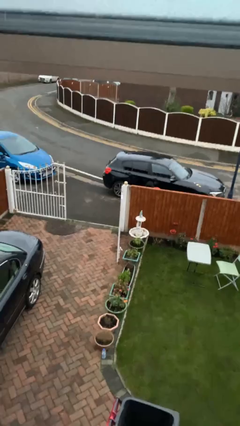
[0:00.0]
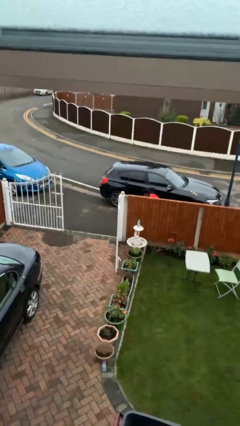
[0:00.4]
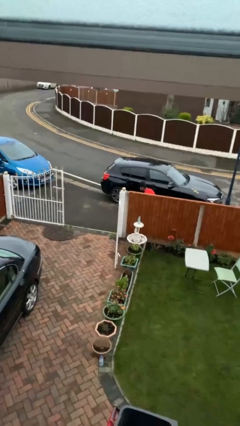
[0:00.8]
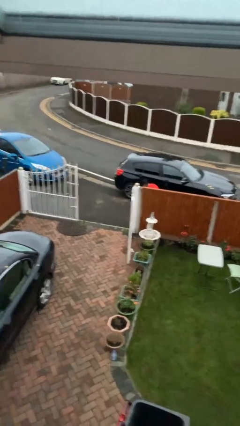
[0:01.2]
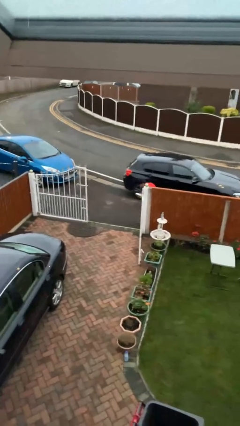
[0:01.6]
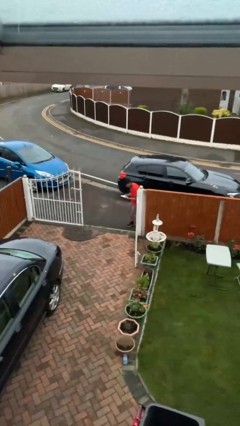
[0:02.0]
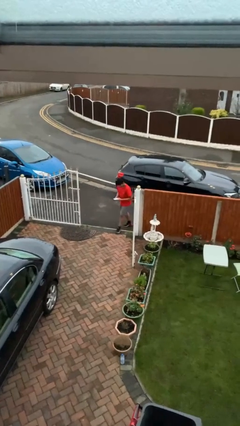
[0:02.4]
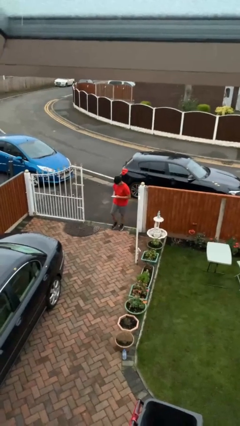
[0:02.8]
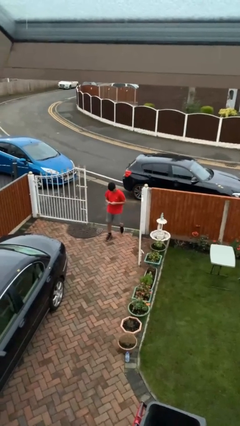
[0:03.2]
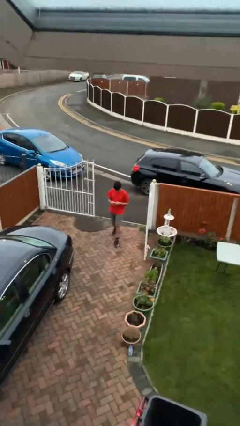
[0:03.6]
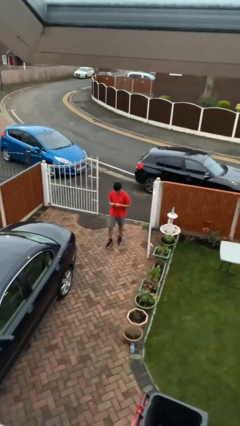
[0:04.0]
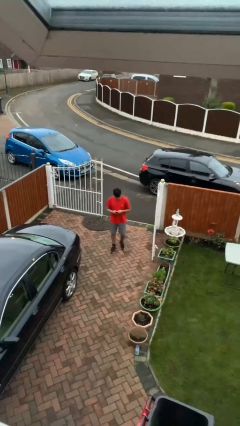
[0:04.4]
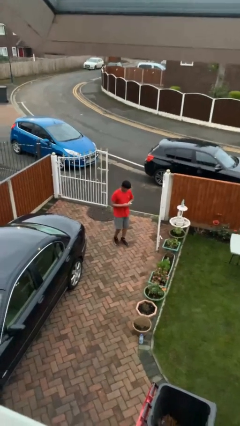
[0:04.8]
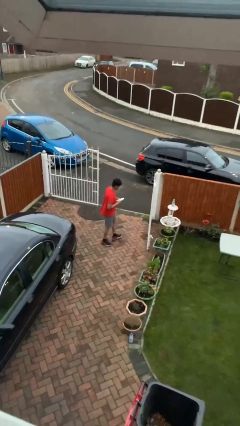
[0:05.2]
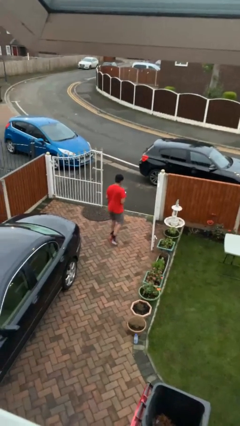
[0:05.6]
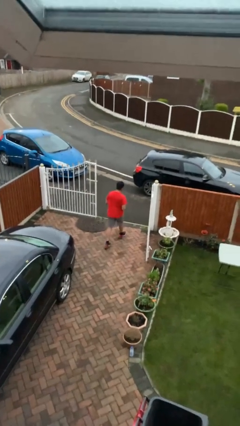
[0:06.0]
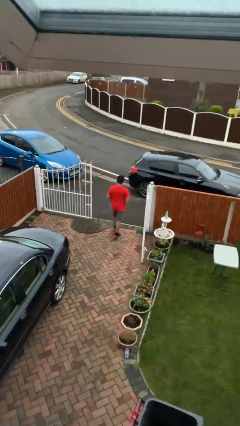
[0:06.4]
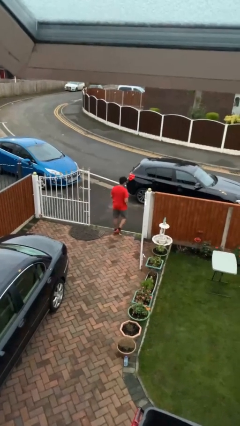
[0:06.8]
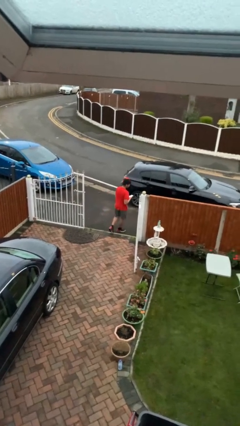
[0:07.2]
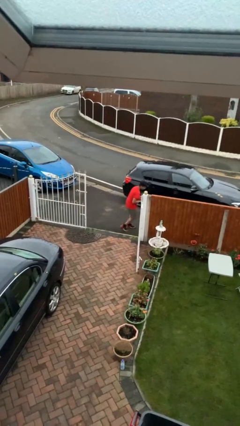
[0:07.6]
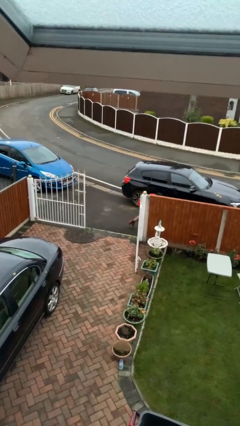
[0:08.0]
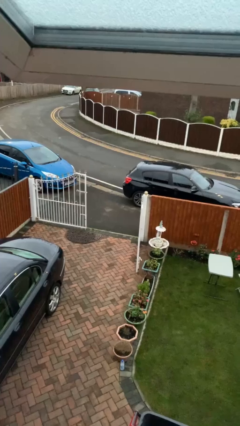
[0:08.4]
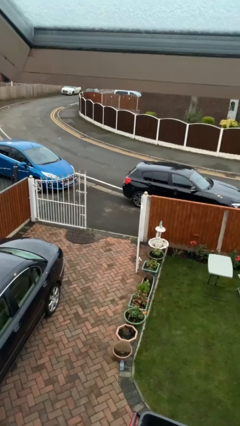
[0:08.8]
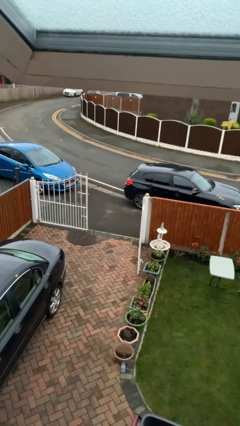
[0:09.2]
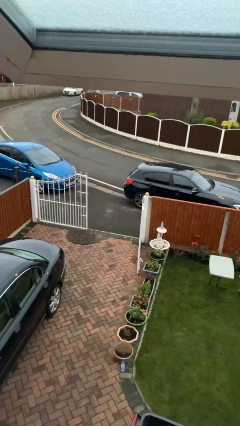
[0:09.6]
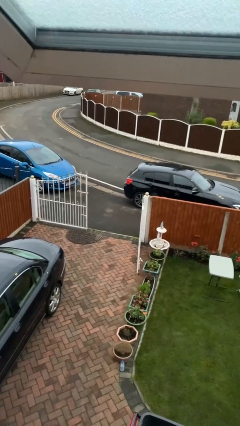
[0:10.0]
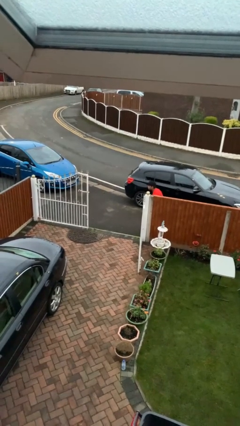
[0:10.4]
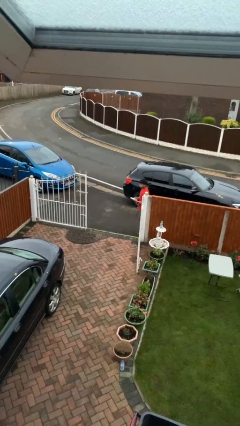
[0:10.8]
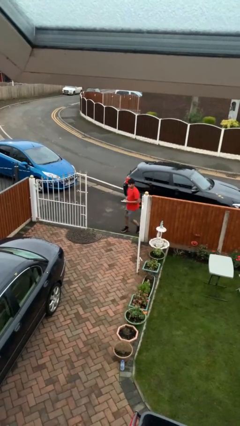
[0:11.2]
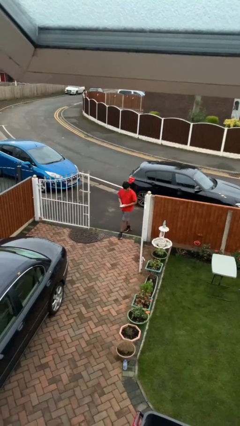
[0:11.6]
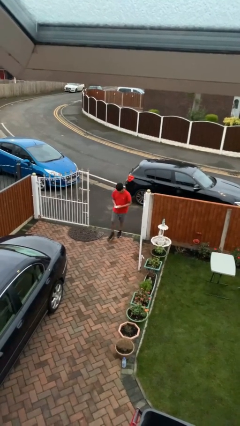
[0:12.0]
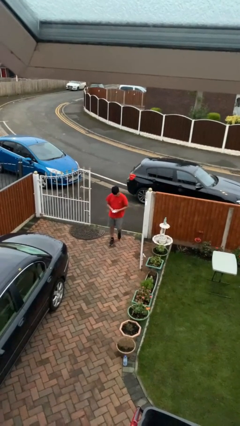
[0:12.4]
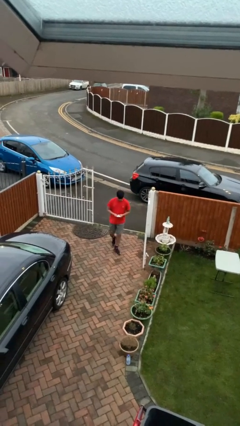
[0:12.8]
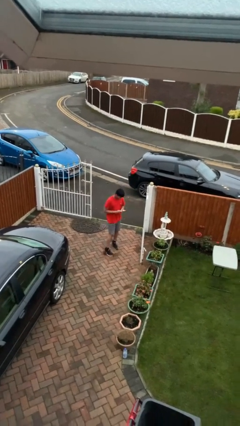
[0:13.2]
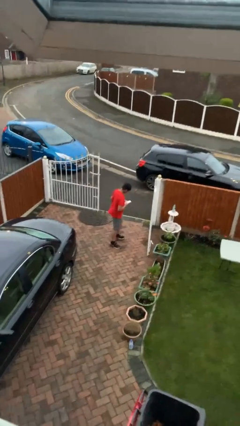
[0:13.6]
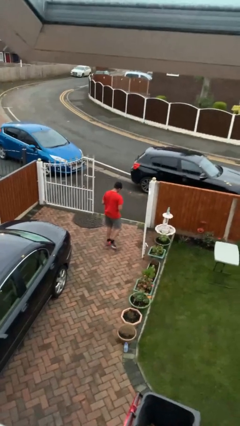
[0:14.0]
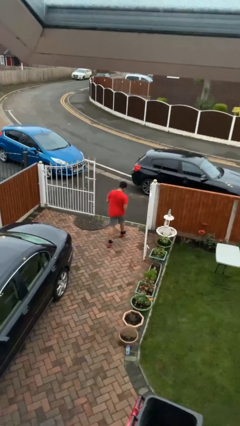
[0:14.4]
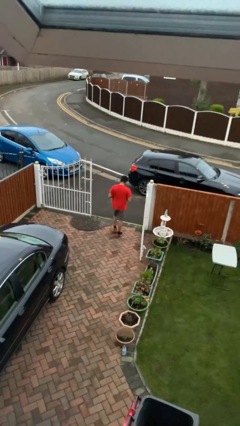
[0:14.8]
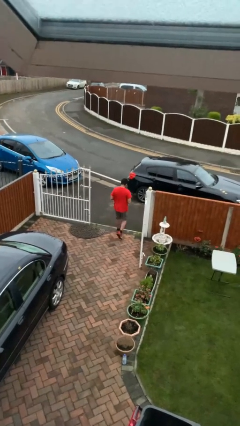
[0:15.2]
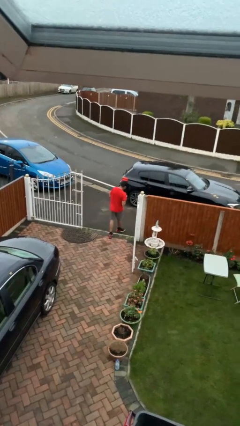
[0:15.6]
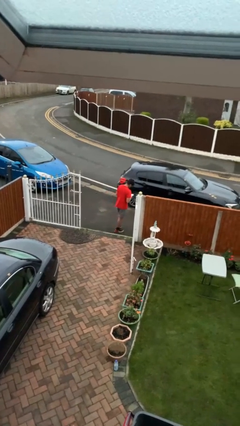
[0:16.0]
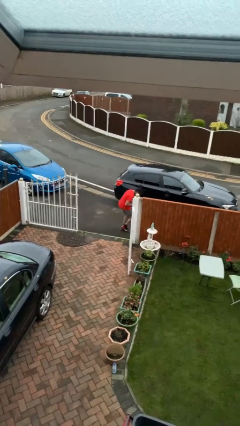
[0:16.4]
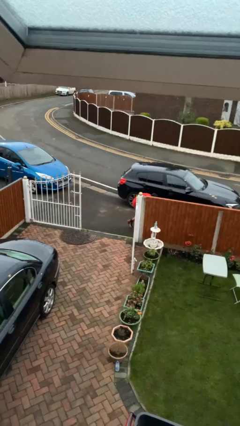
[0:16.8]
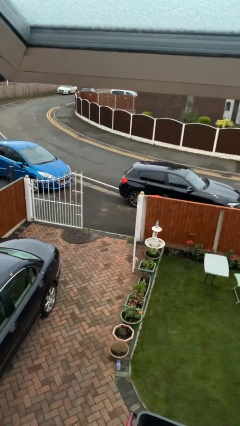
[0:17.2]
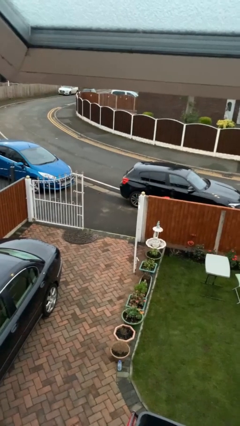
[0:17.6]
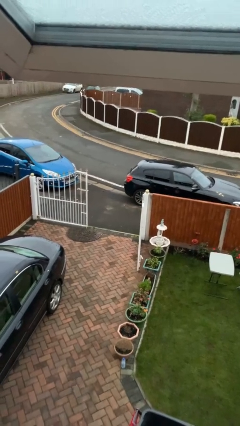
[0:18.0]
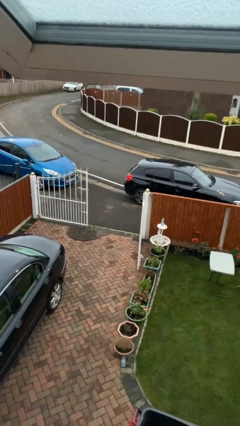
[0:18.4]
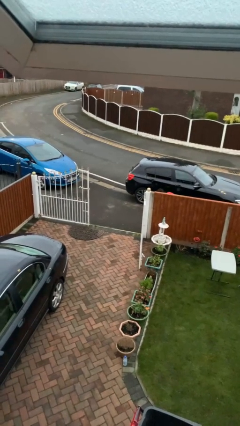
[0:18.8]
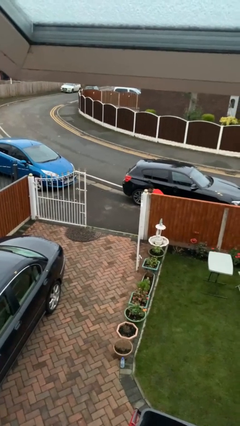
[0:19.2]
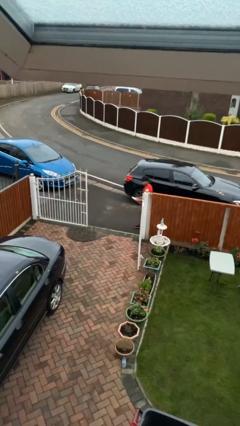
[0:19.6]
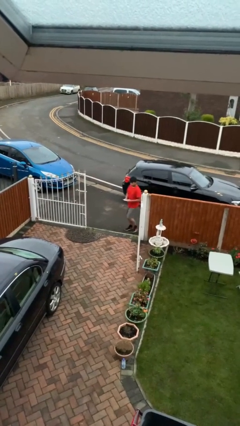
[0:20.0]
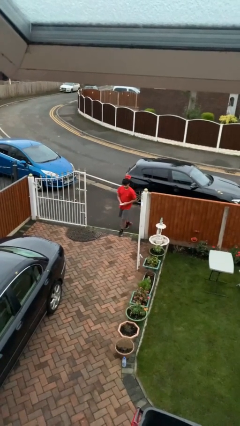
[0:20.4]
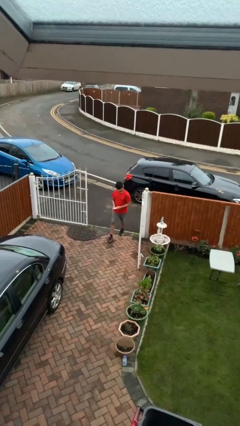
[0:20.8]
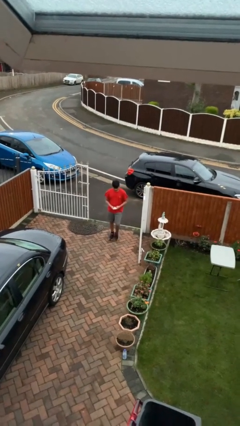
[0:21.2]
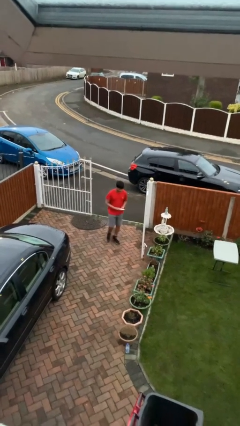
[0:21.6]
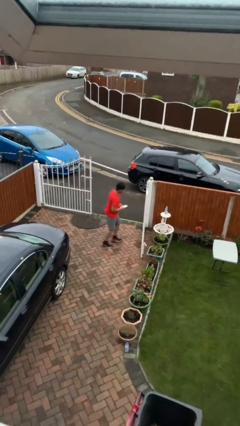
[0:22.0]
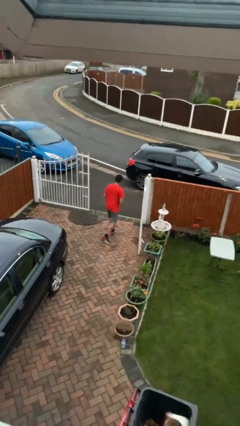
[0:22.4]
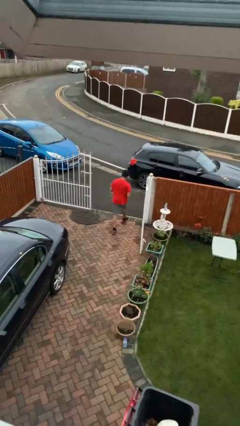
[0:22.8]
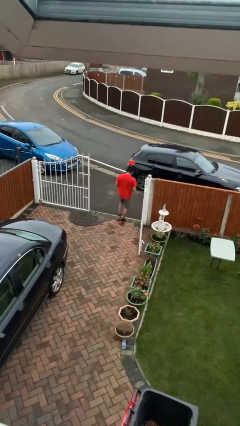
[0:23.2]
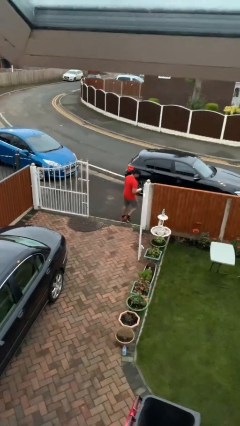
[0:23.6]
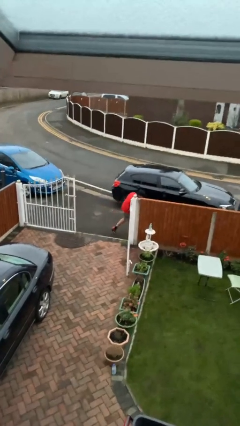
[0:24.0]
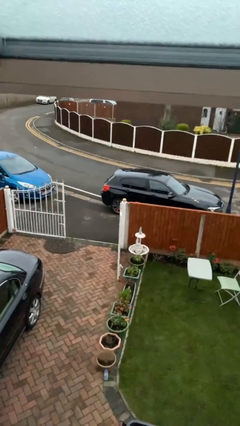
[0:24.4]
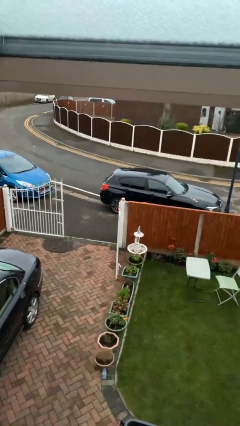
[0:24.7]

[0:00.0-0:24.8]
person texts on phone

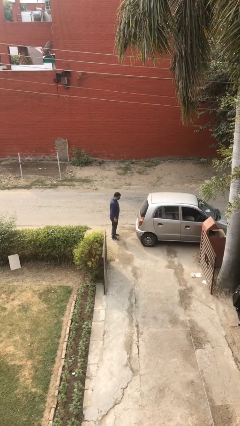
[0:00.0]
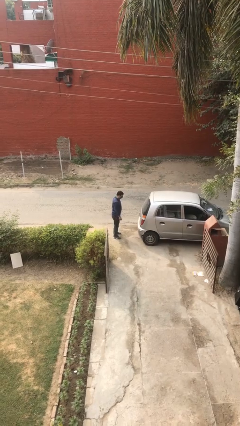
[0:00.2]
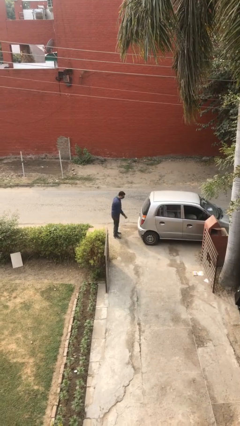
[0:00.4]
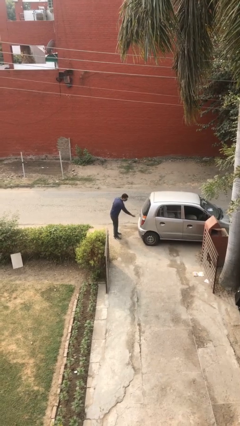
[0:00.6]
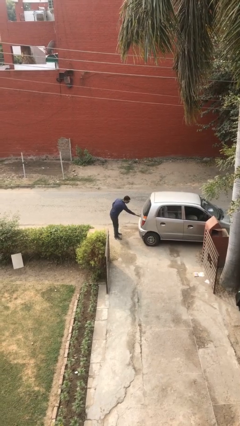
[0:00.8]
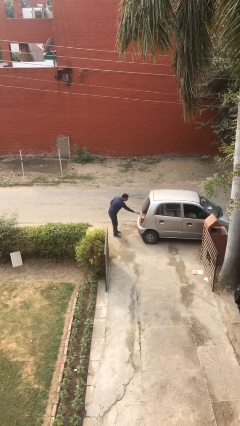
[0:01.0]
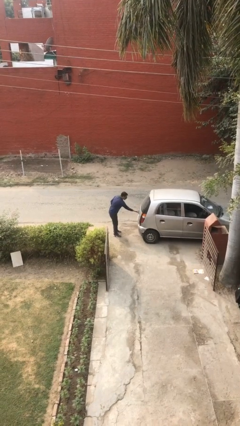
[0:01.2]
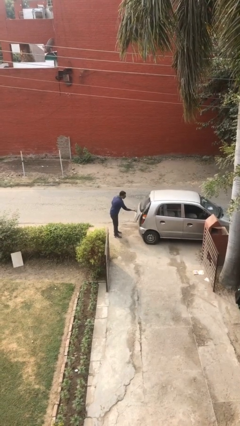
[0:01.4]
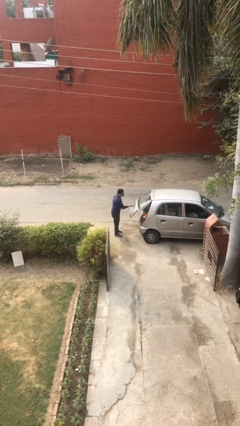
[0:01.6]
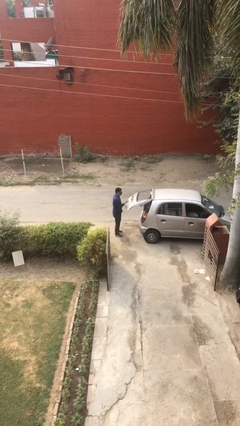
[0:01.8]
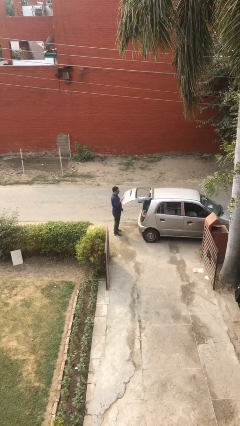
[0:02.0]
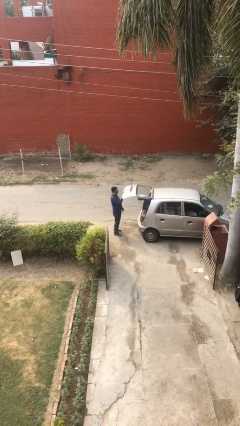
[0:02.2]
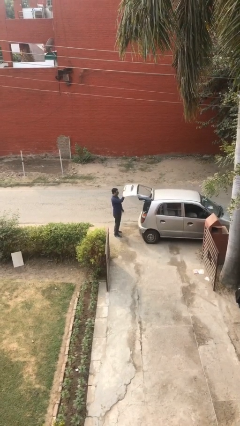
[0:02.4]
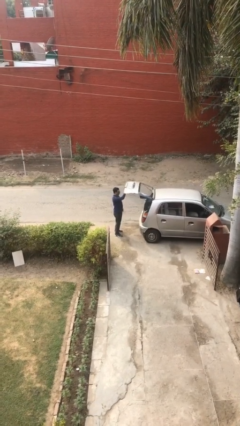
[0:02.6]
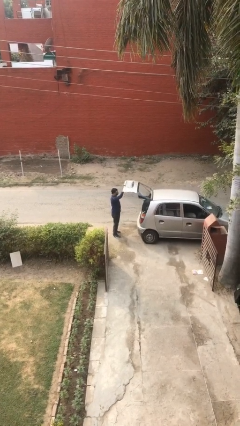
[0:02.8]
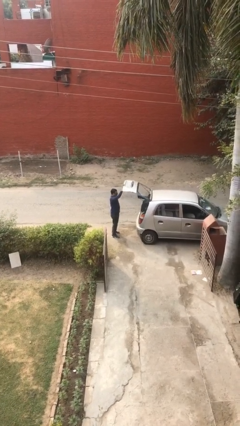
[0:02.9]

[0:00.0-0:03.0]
person opens car trunk

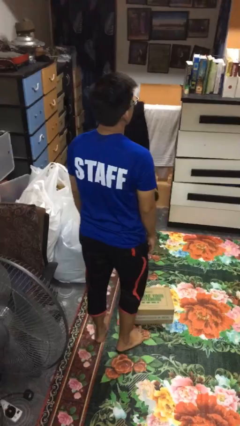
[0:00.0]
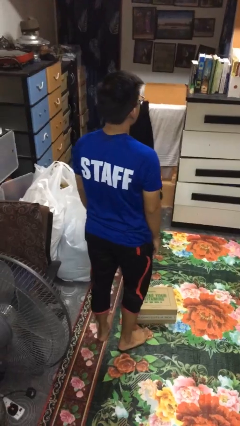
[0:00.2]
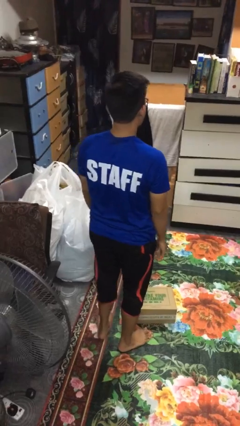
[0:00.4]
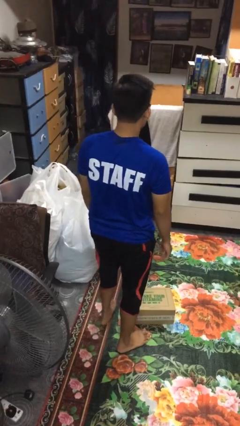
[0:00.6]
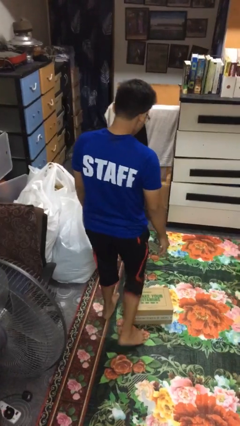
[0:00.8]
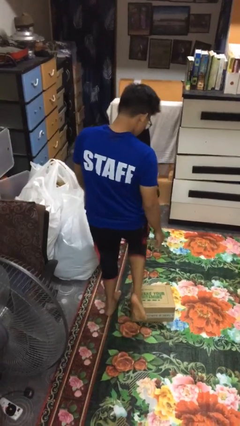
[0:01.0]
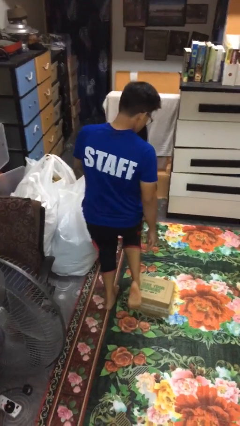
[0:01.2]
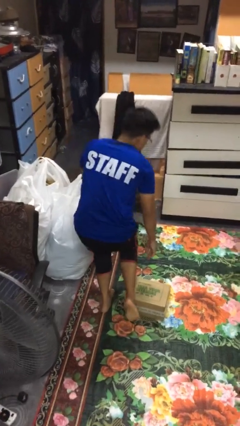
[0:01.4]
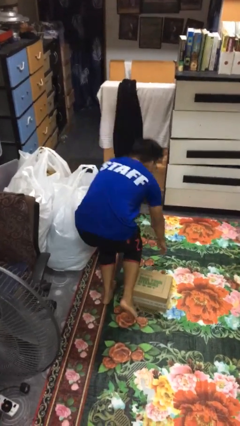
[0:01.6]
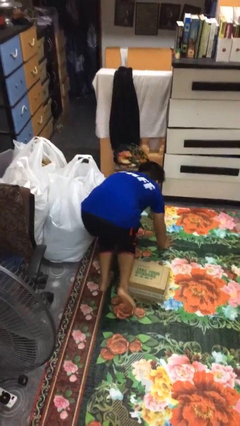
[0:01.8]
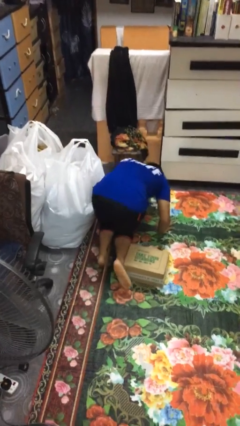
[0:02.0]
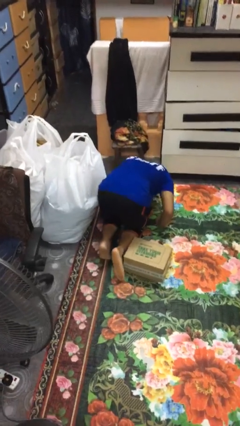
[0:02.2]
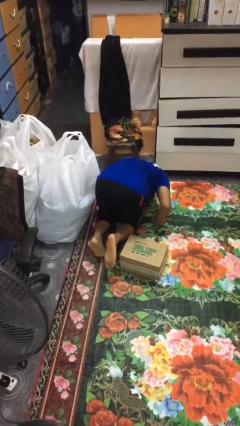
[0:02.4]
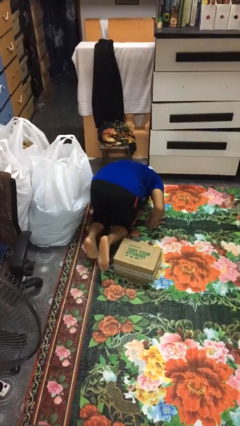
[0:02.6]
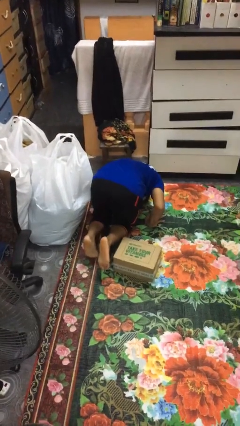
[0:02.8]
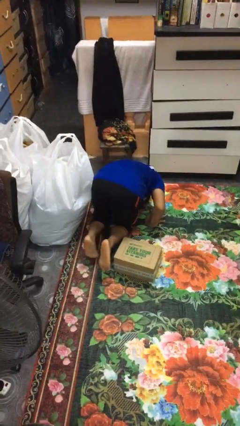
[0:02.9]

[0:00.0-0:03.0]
person trips on object on floor
